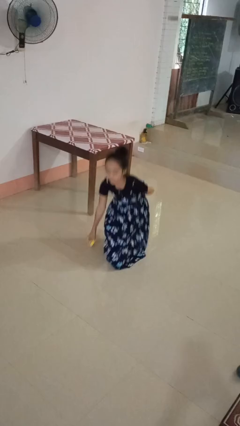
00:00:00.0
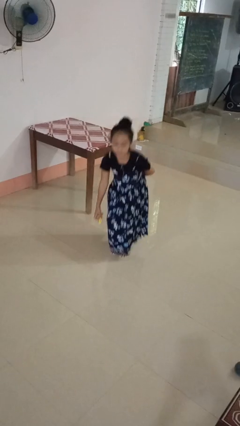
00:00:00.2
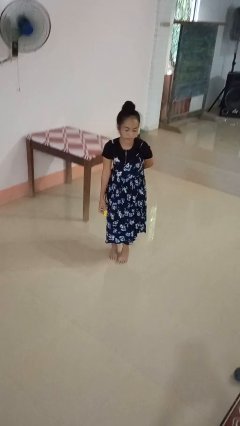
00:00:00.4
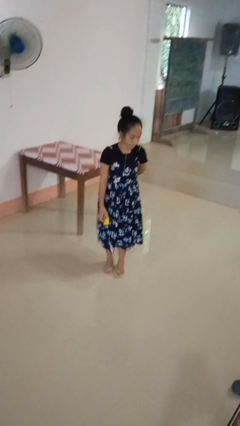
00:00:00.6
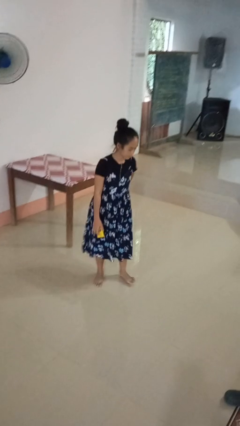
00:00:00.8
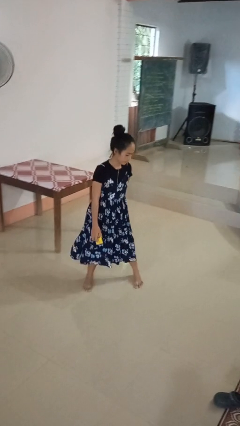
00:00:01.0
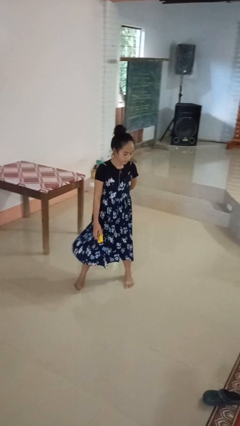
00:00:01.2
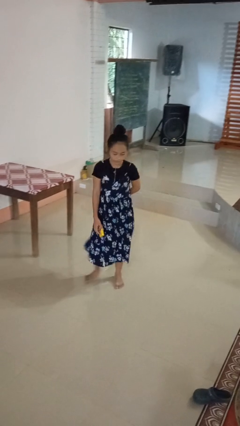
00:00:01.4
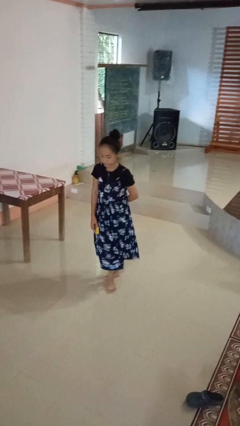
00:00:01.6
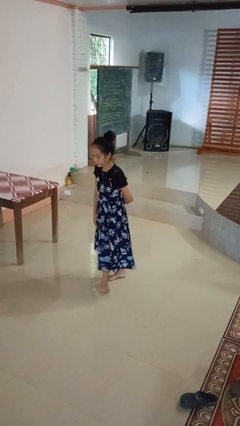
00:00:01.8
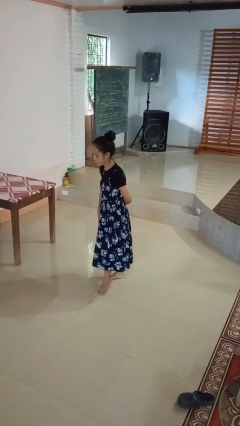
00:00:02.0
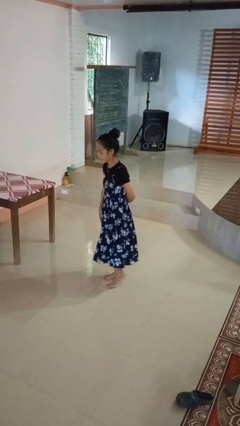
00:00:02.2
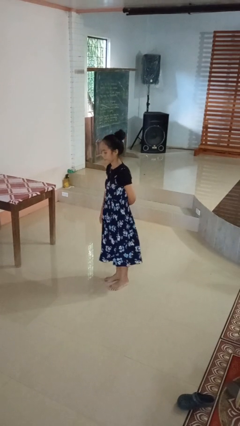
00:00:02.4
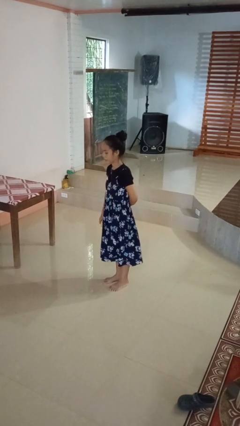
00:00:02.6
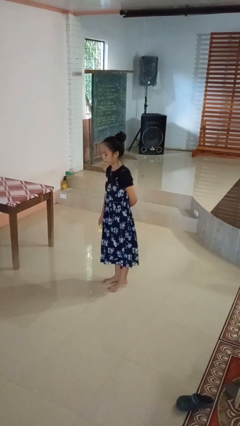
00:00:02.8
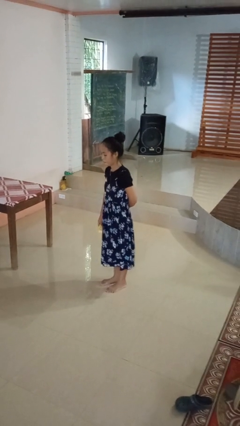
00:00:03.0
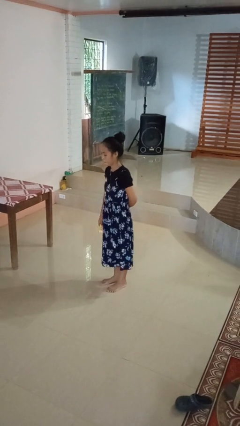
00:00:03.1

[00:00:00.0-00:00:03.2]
person picks up object from floor

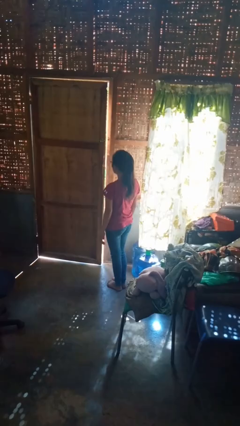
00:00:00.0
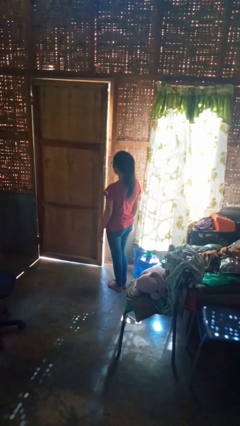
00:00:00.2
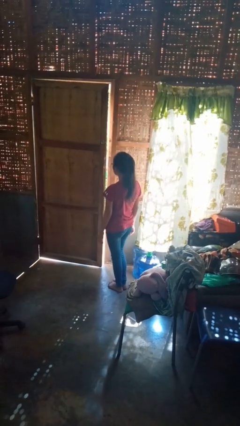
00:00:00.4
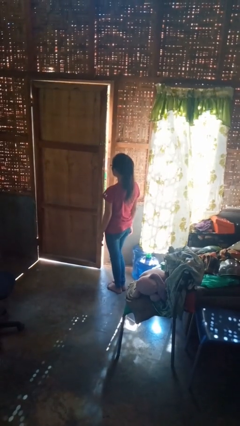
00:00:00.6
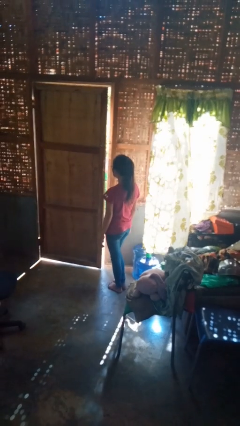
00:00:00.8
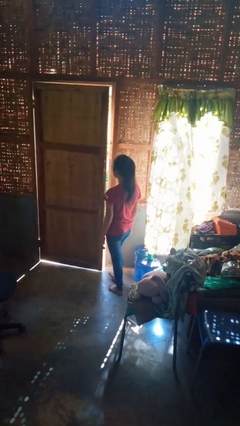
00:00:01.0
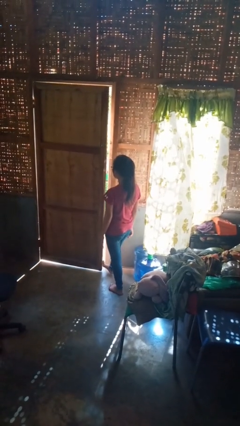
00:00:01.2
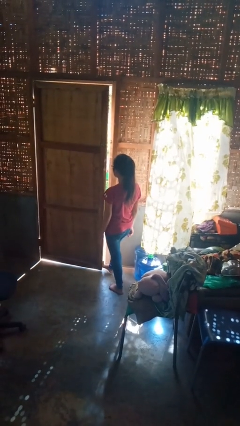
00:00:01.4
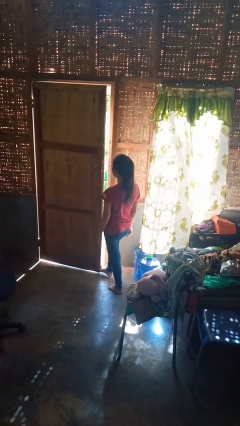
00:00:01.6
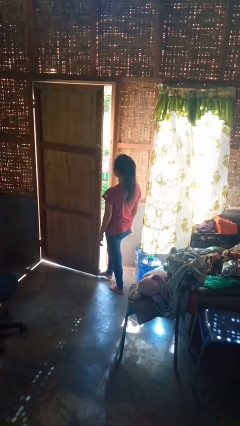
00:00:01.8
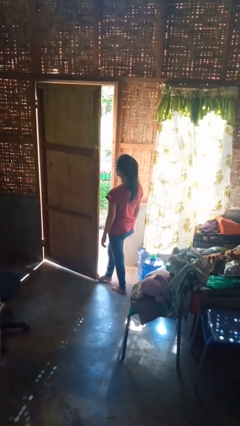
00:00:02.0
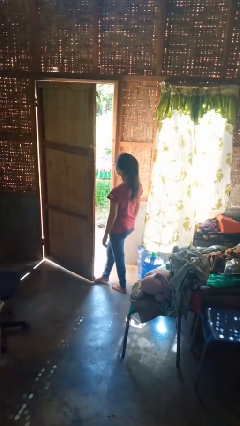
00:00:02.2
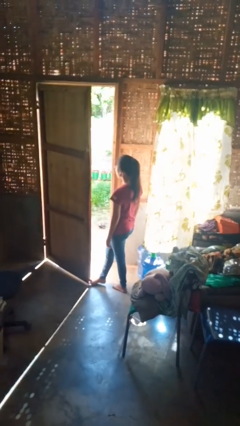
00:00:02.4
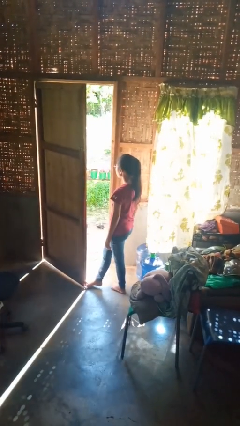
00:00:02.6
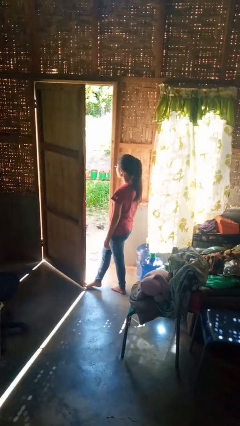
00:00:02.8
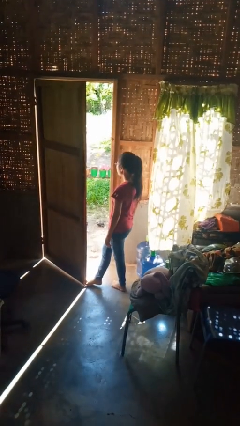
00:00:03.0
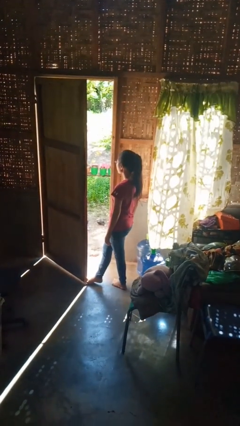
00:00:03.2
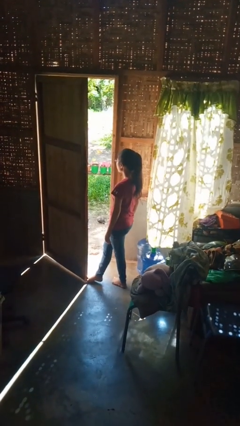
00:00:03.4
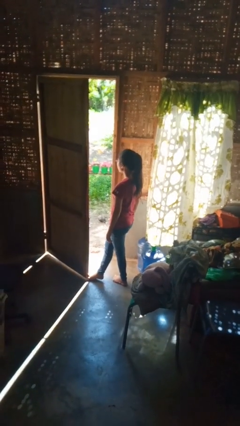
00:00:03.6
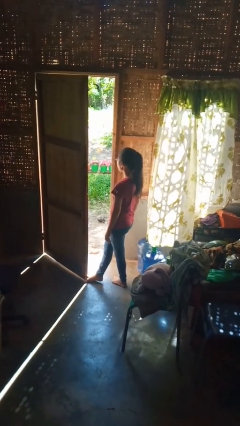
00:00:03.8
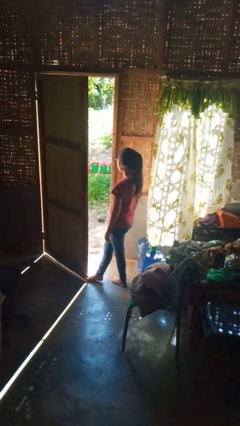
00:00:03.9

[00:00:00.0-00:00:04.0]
person opens facility door

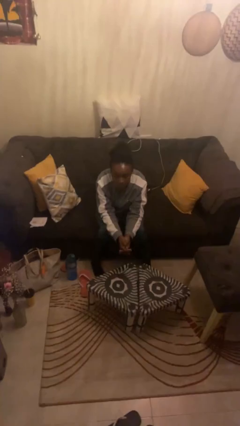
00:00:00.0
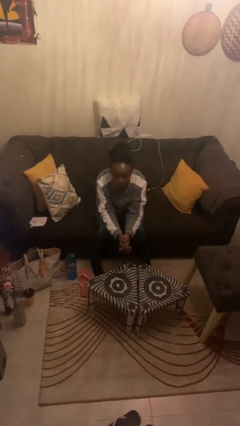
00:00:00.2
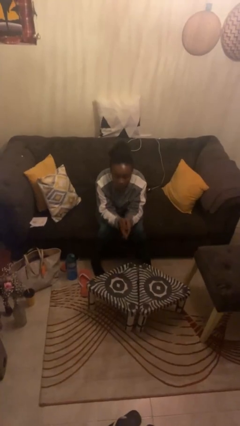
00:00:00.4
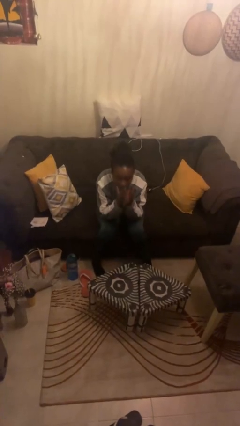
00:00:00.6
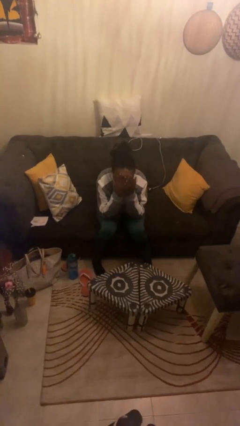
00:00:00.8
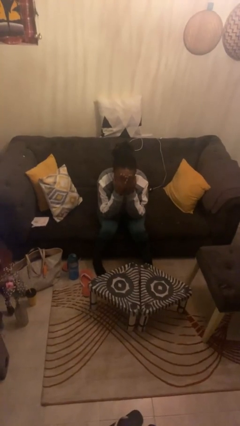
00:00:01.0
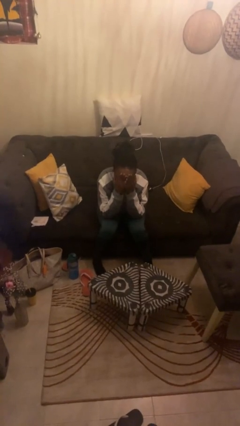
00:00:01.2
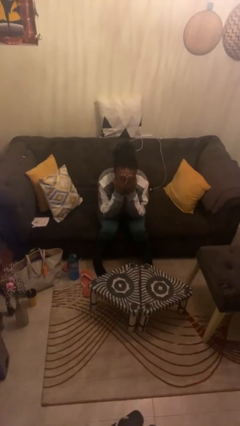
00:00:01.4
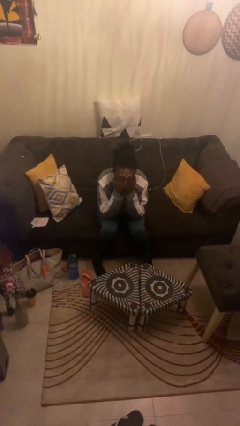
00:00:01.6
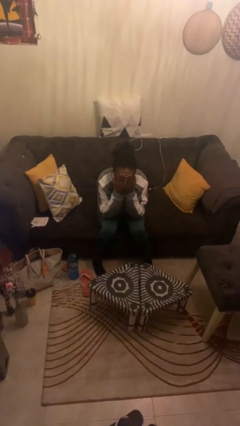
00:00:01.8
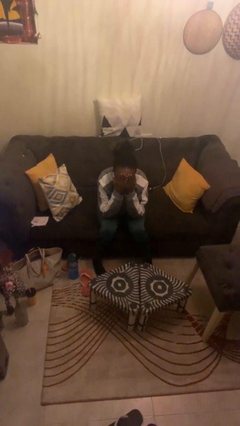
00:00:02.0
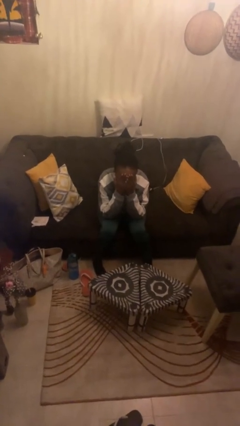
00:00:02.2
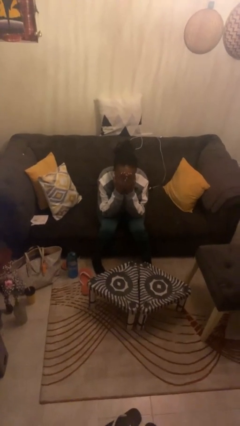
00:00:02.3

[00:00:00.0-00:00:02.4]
person covers face with hands

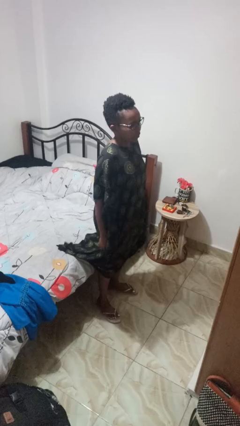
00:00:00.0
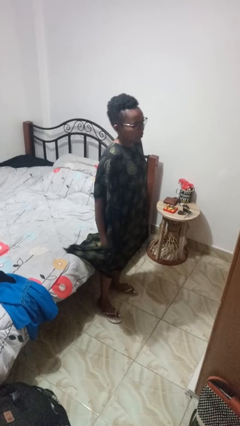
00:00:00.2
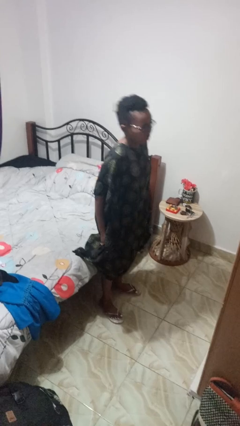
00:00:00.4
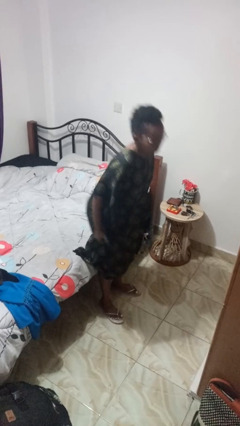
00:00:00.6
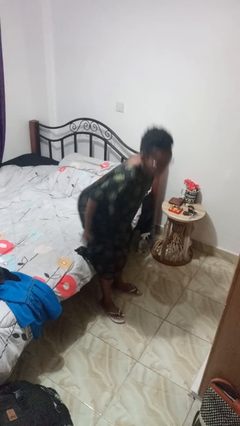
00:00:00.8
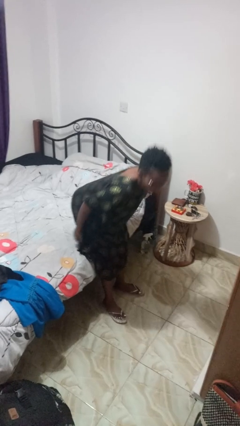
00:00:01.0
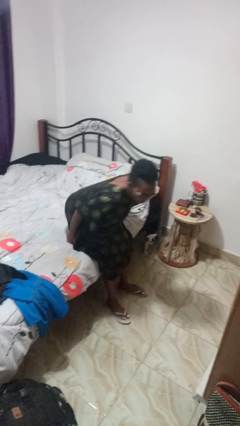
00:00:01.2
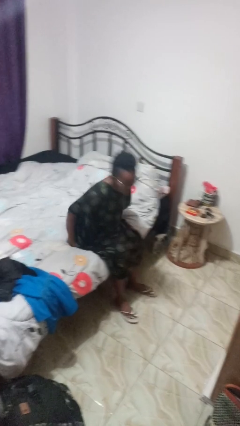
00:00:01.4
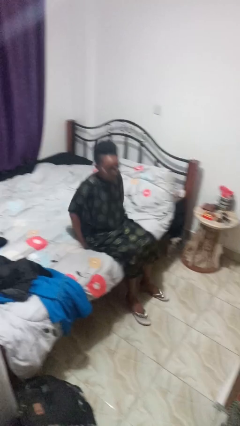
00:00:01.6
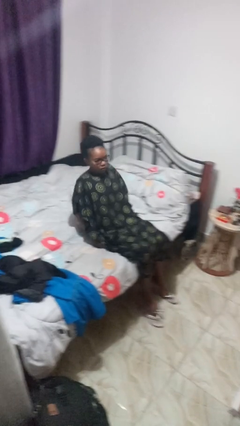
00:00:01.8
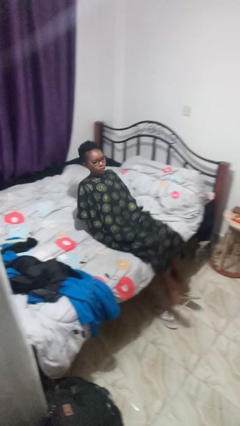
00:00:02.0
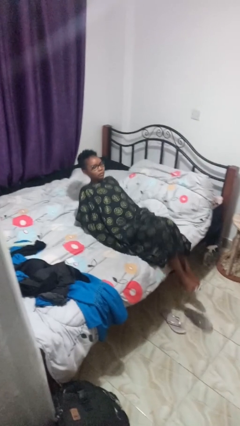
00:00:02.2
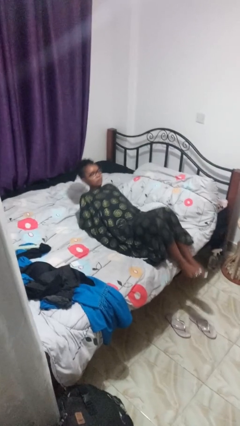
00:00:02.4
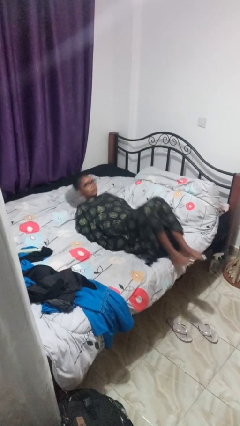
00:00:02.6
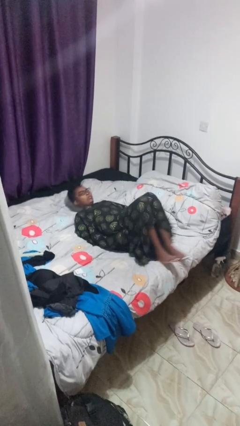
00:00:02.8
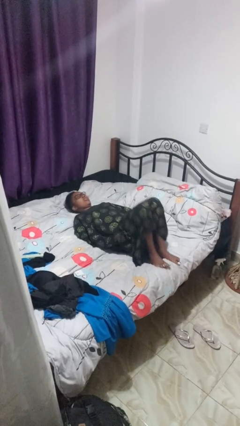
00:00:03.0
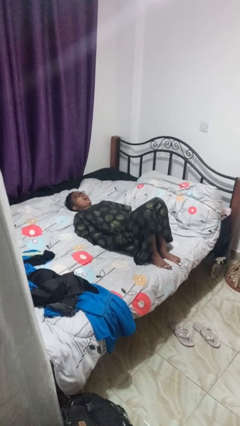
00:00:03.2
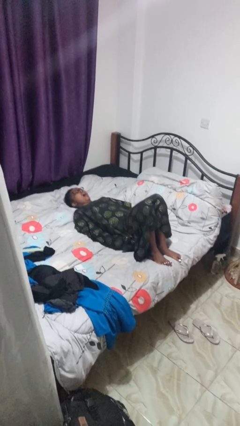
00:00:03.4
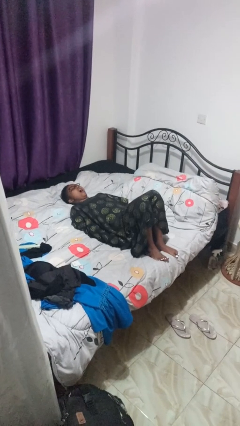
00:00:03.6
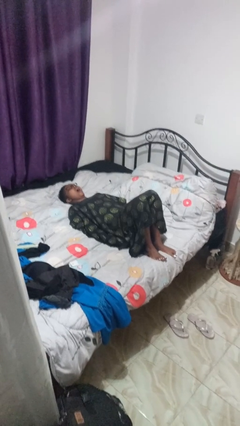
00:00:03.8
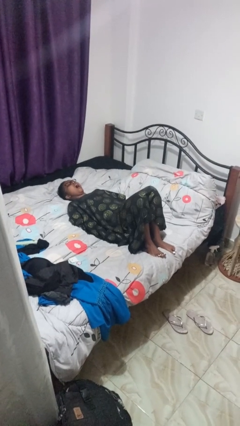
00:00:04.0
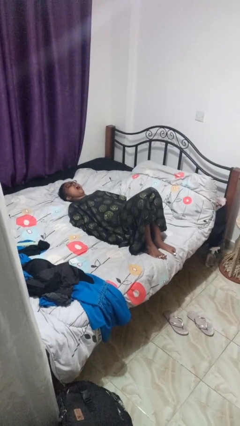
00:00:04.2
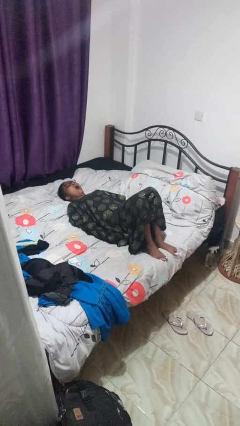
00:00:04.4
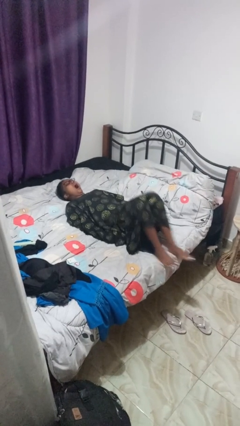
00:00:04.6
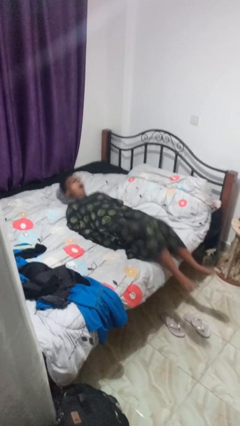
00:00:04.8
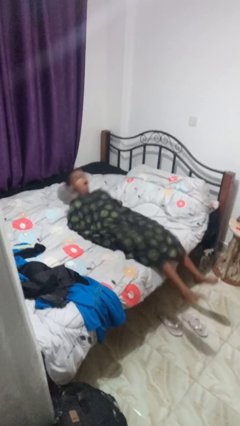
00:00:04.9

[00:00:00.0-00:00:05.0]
person lies down on bed

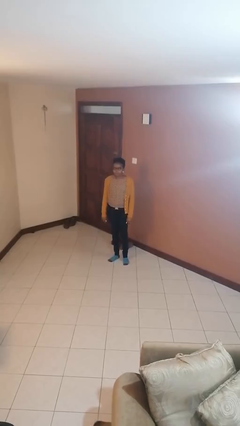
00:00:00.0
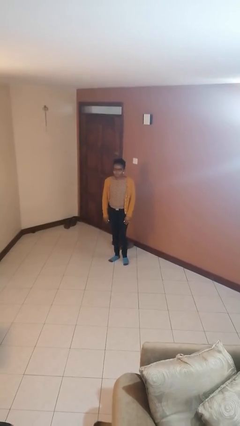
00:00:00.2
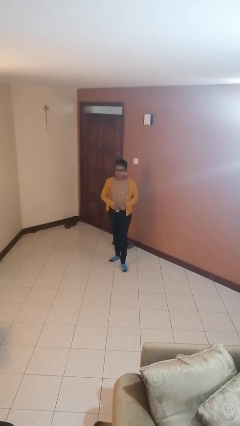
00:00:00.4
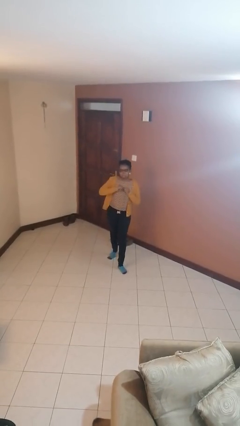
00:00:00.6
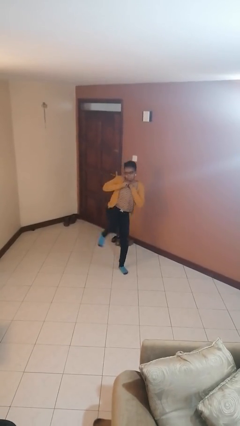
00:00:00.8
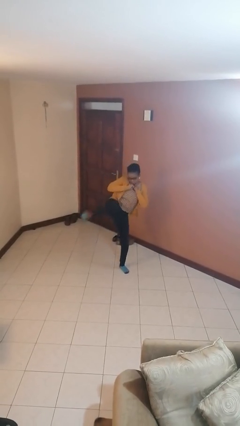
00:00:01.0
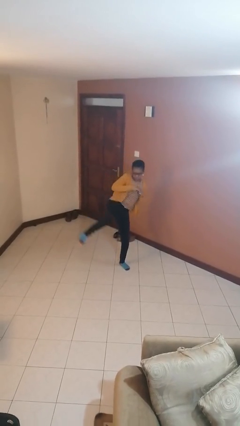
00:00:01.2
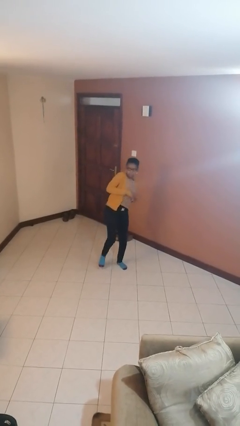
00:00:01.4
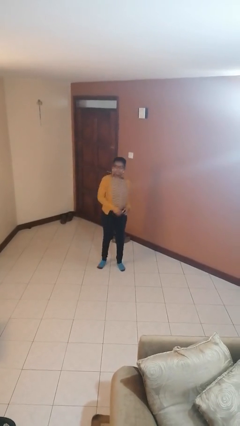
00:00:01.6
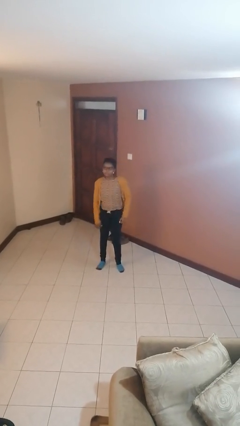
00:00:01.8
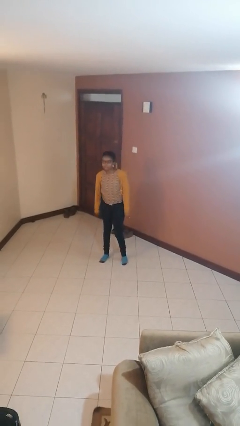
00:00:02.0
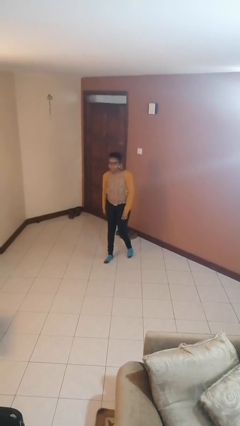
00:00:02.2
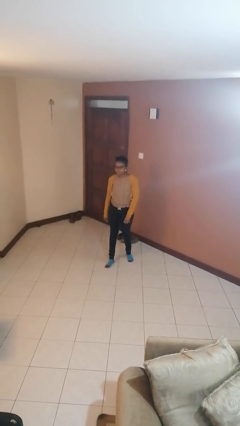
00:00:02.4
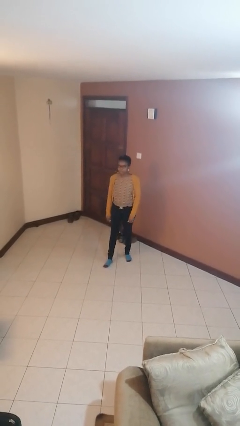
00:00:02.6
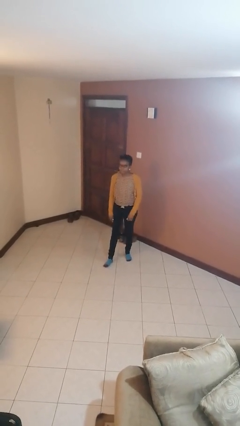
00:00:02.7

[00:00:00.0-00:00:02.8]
person karate kicks
